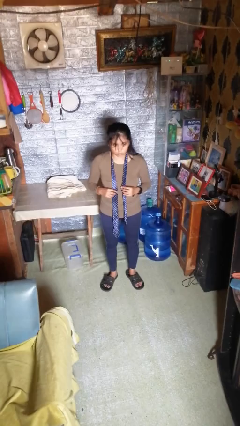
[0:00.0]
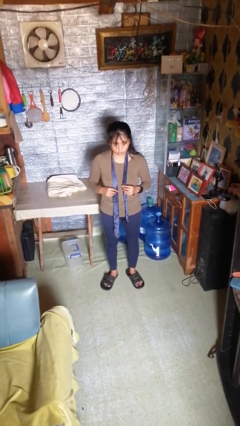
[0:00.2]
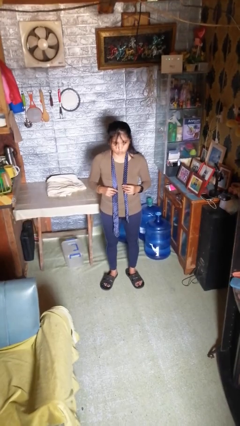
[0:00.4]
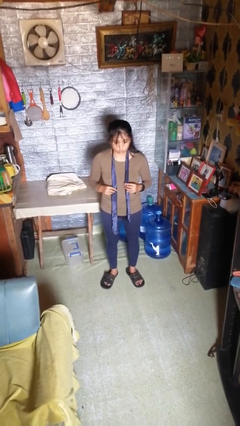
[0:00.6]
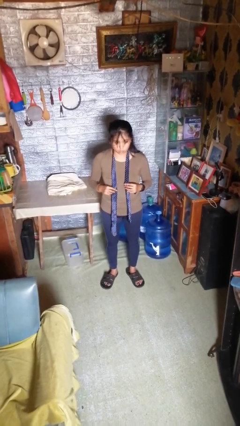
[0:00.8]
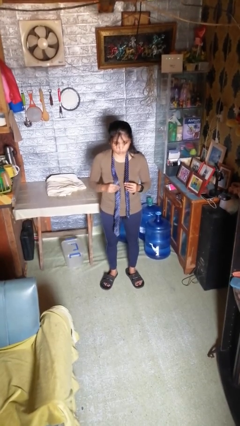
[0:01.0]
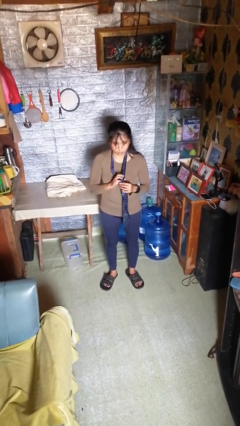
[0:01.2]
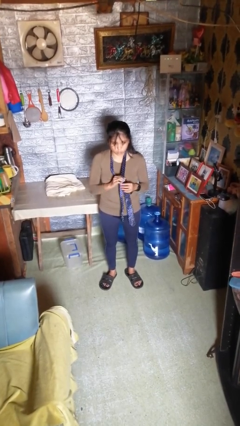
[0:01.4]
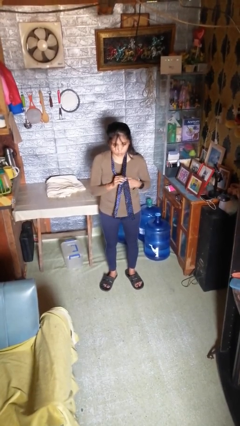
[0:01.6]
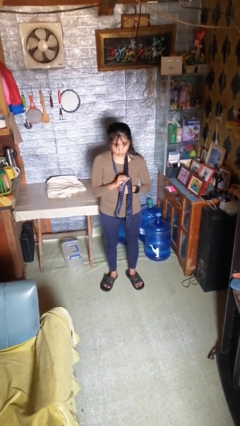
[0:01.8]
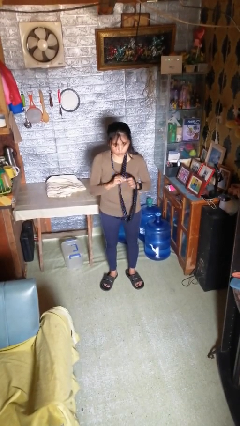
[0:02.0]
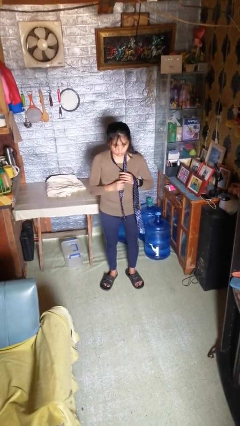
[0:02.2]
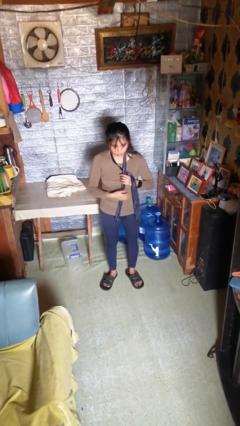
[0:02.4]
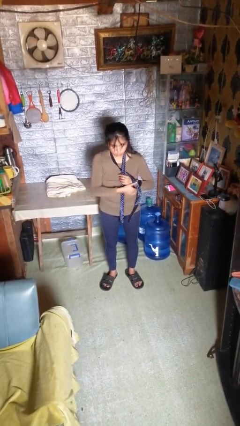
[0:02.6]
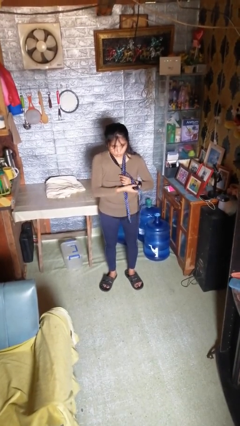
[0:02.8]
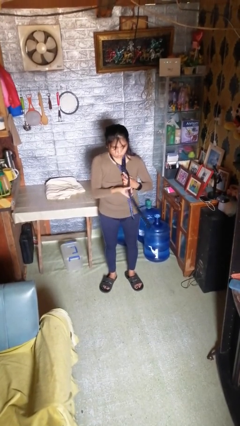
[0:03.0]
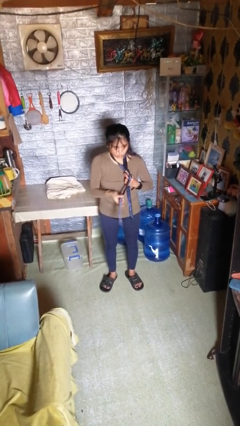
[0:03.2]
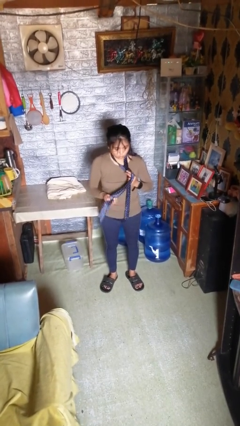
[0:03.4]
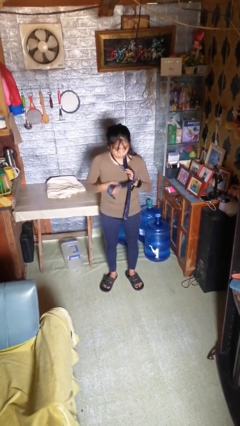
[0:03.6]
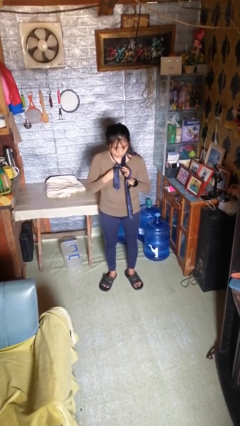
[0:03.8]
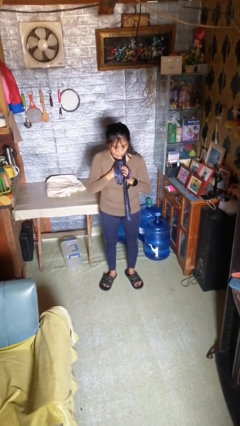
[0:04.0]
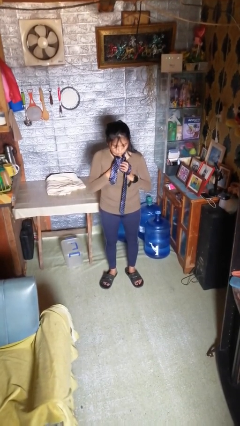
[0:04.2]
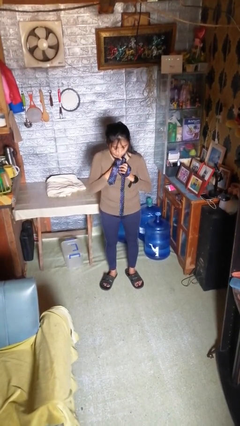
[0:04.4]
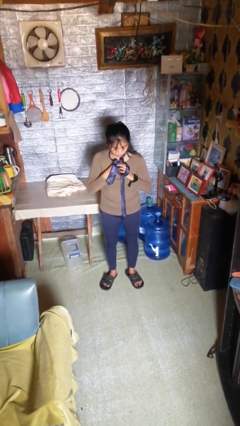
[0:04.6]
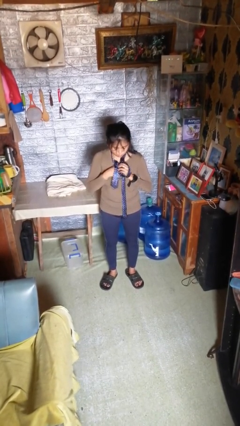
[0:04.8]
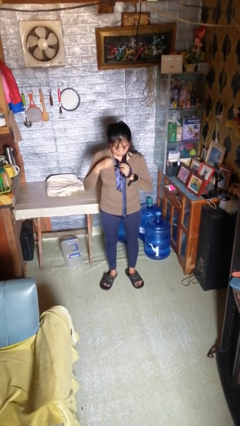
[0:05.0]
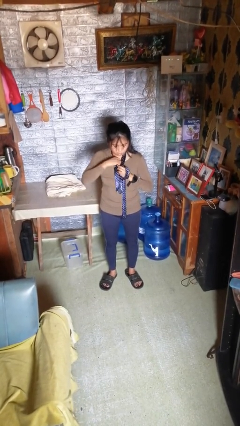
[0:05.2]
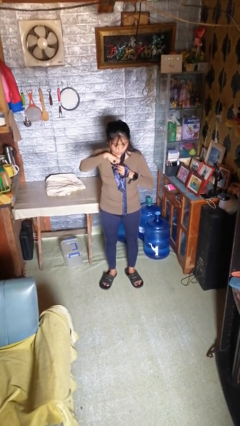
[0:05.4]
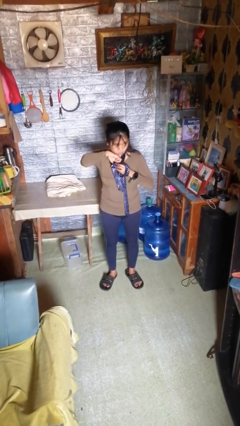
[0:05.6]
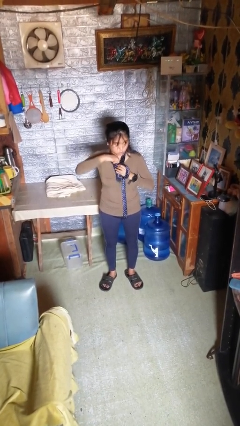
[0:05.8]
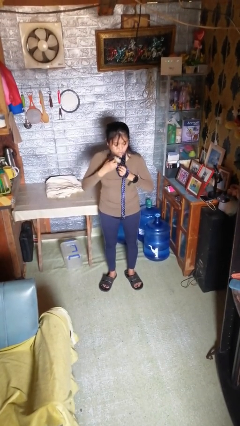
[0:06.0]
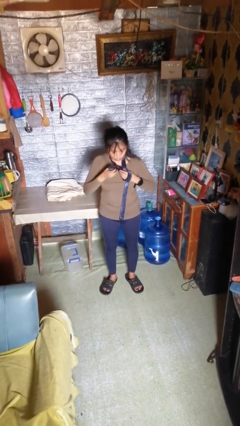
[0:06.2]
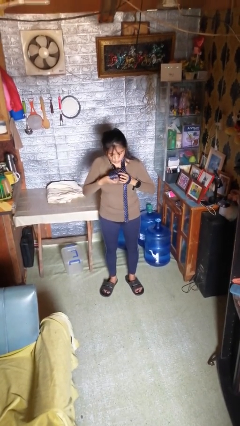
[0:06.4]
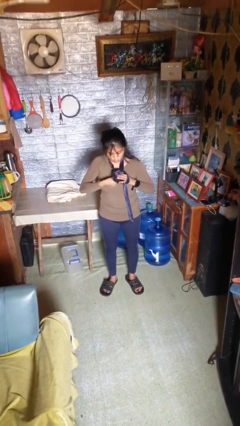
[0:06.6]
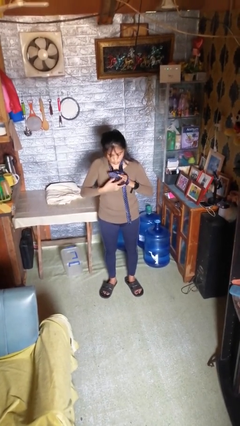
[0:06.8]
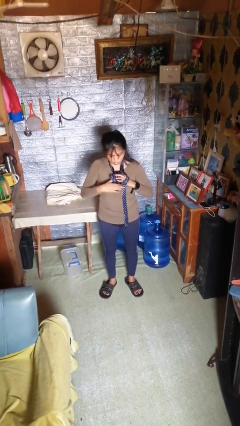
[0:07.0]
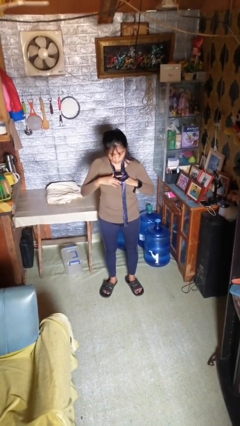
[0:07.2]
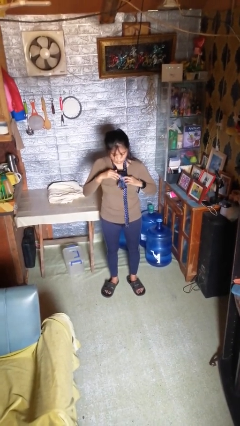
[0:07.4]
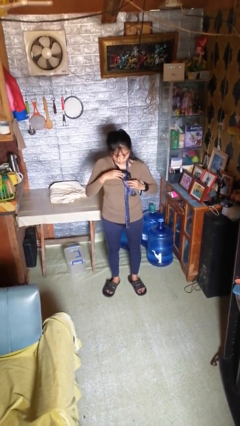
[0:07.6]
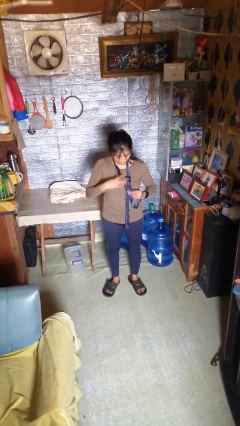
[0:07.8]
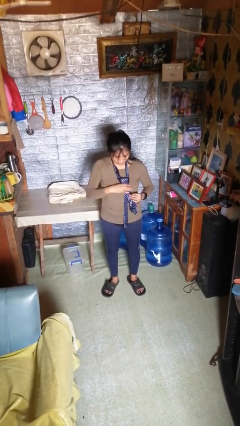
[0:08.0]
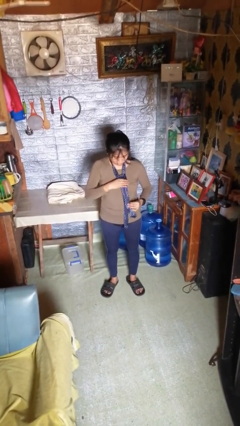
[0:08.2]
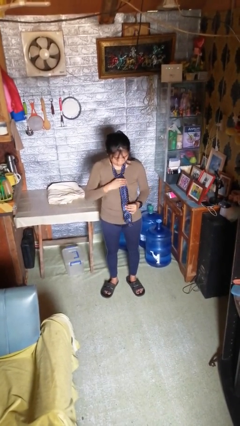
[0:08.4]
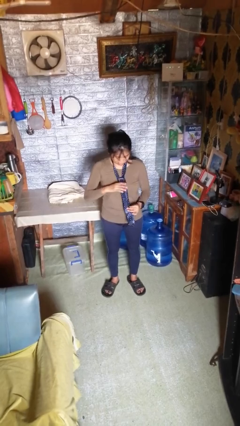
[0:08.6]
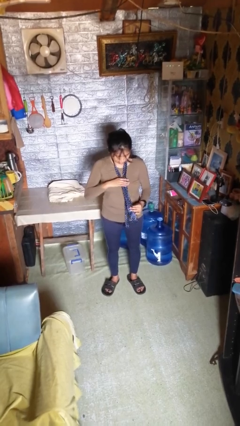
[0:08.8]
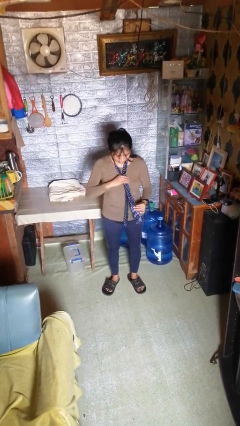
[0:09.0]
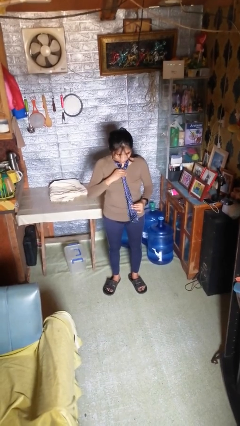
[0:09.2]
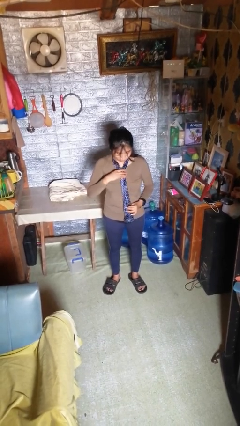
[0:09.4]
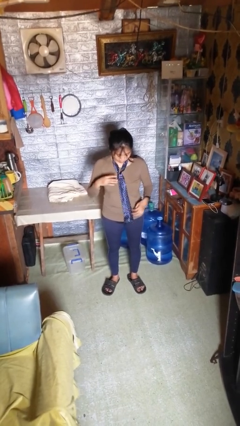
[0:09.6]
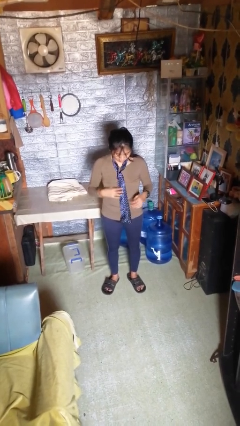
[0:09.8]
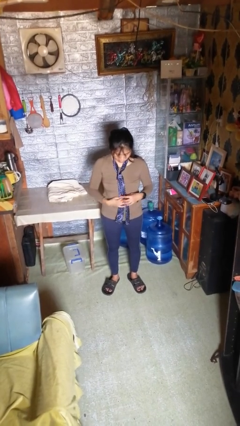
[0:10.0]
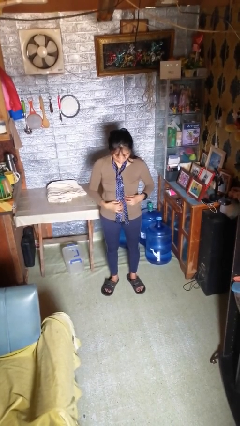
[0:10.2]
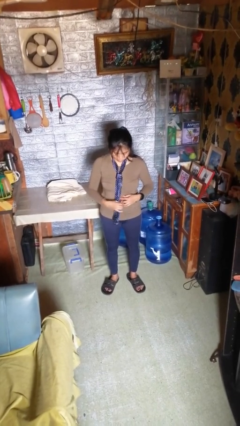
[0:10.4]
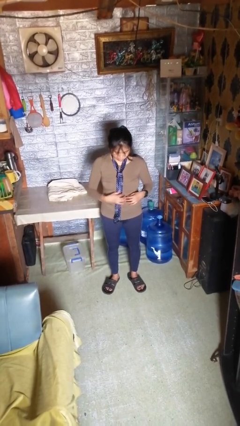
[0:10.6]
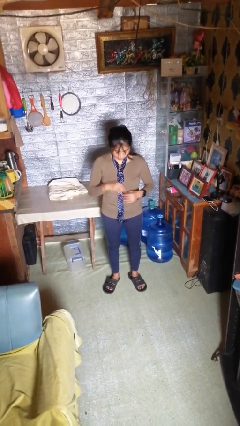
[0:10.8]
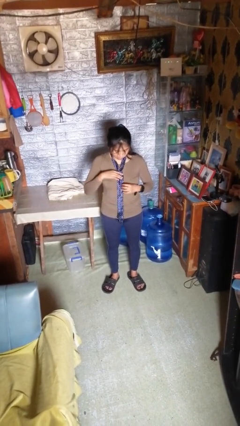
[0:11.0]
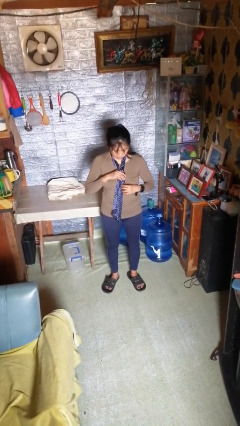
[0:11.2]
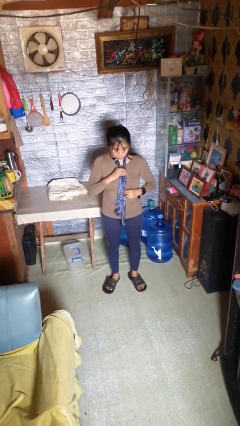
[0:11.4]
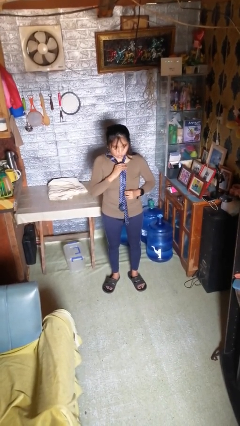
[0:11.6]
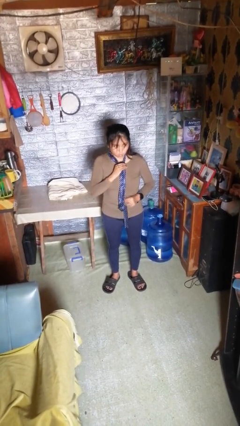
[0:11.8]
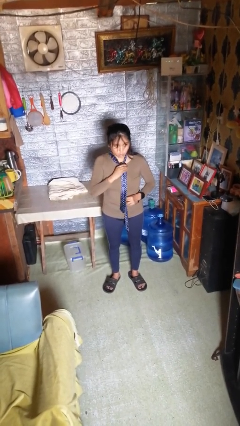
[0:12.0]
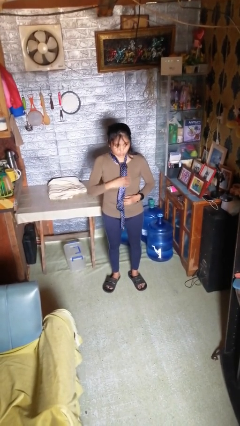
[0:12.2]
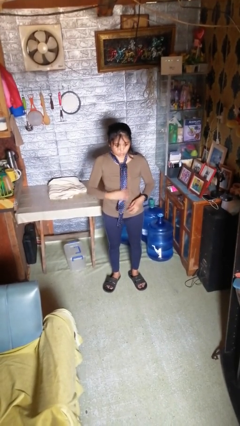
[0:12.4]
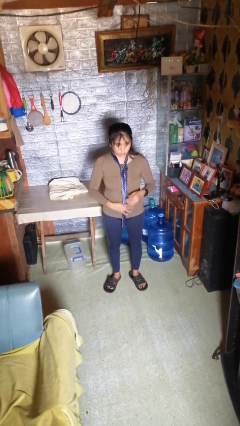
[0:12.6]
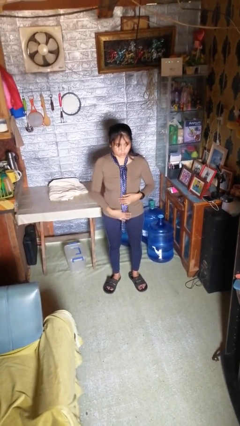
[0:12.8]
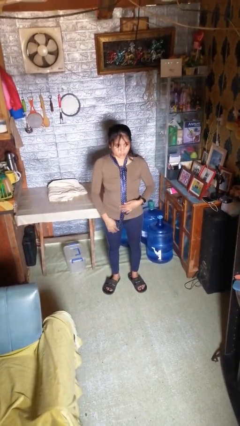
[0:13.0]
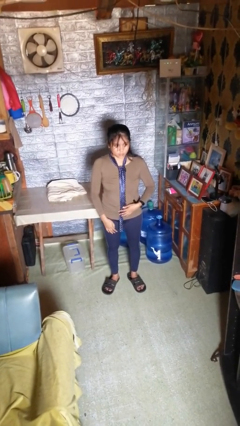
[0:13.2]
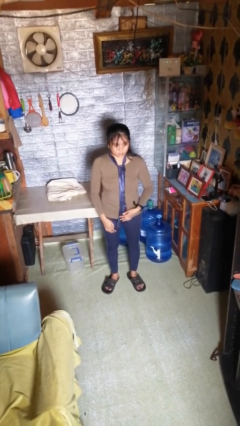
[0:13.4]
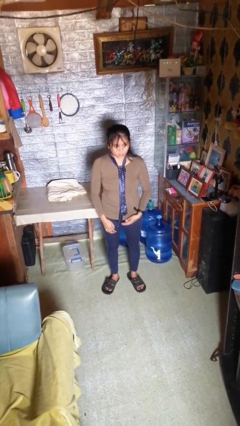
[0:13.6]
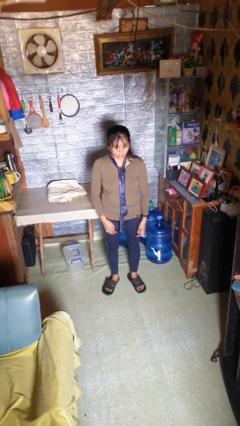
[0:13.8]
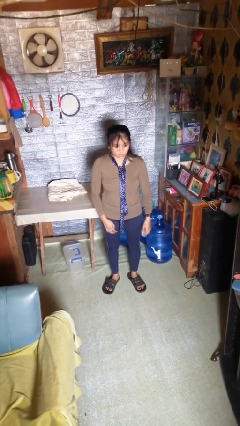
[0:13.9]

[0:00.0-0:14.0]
person puts on necktie

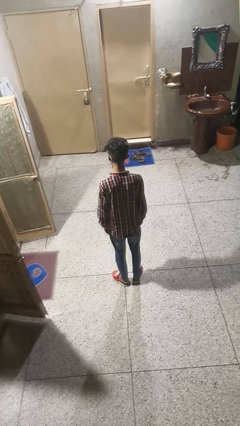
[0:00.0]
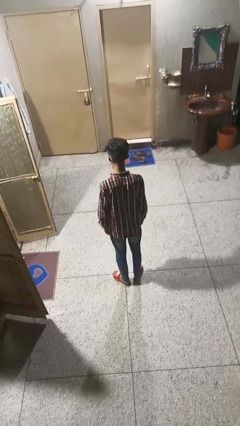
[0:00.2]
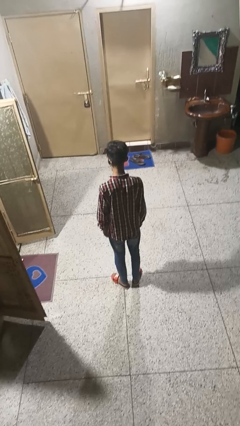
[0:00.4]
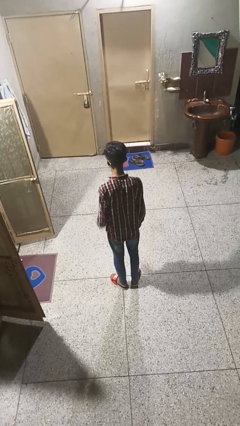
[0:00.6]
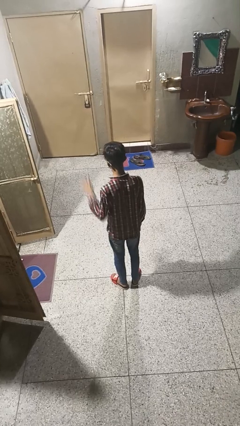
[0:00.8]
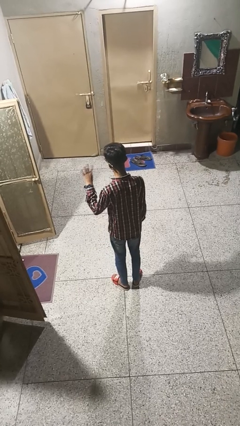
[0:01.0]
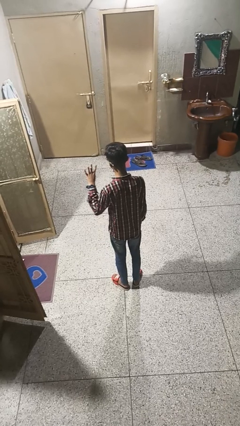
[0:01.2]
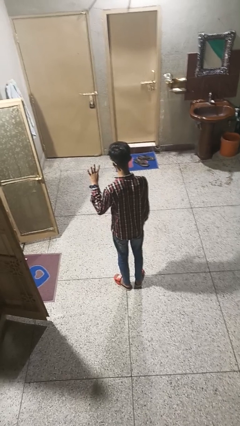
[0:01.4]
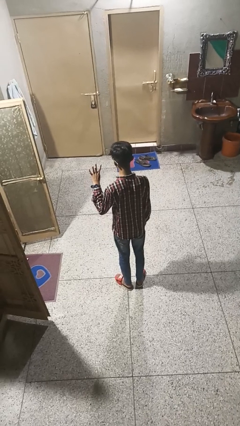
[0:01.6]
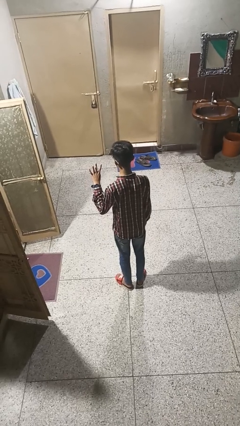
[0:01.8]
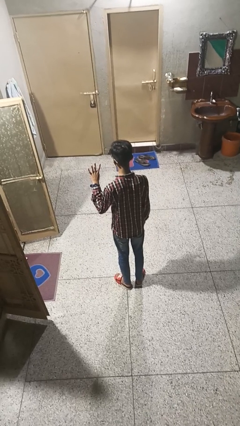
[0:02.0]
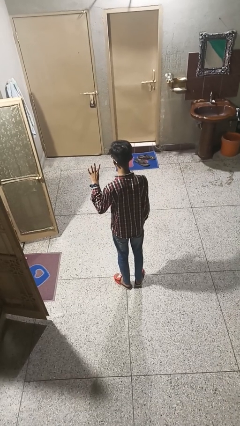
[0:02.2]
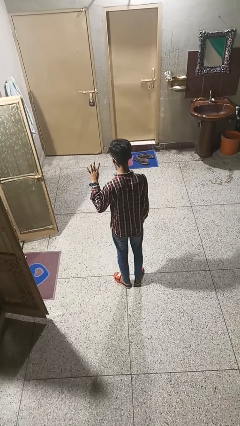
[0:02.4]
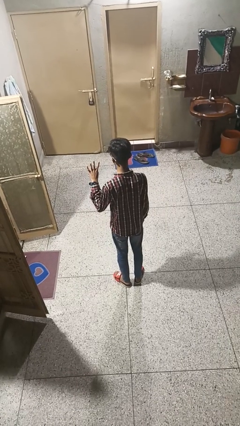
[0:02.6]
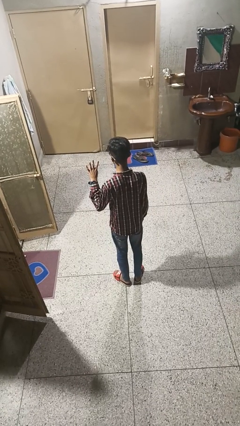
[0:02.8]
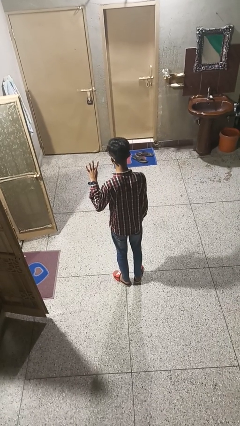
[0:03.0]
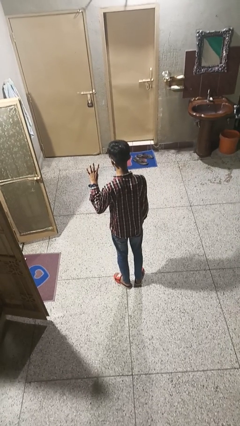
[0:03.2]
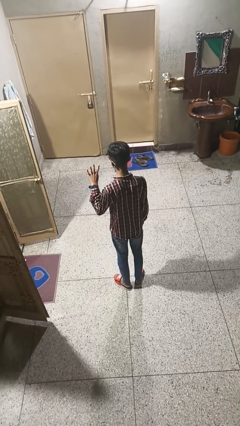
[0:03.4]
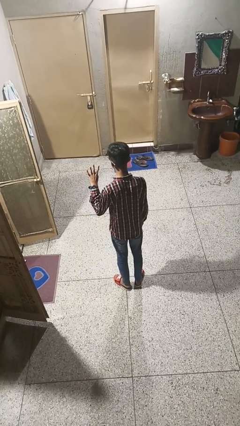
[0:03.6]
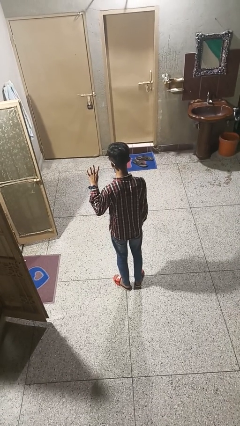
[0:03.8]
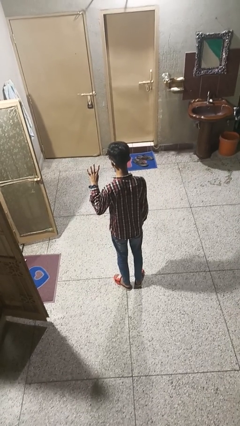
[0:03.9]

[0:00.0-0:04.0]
person gestures number four

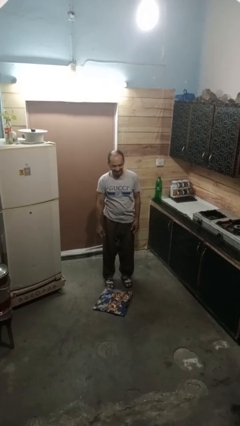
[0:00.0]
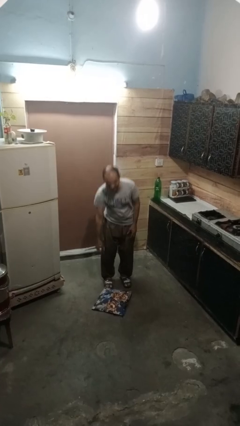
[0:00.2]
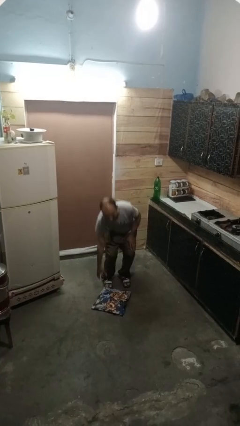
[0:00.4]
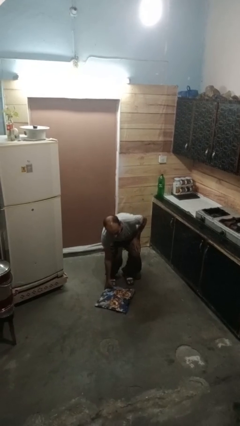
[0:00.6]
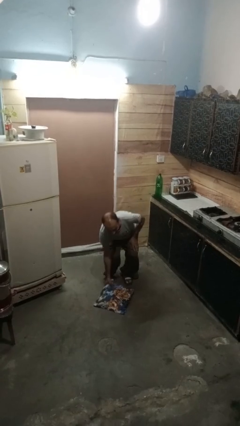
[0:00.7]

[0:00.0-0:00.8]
person picks up object from floor
